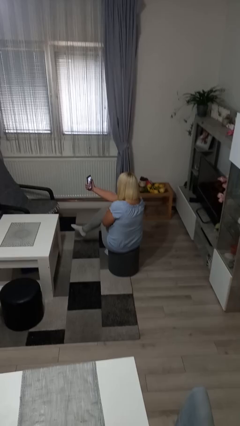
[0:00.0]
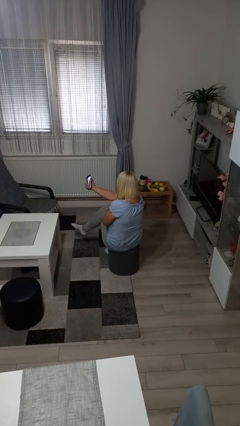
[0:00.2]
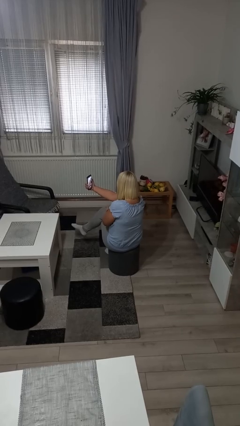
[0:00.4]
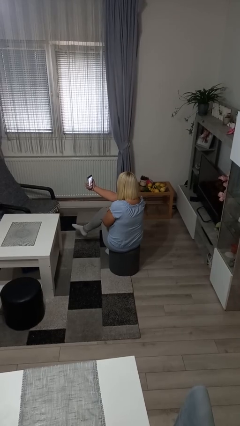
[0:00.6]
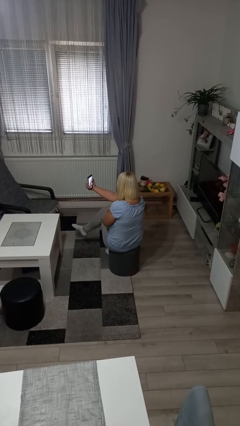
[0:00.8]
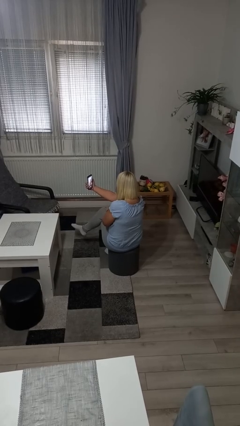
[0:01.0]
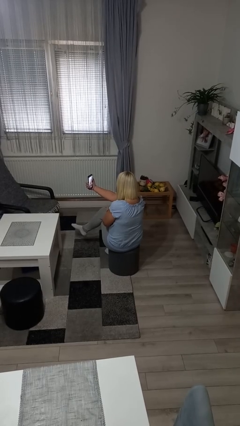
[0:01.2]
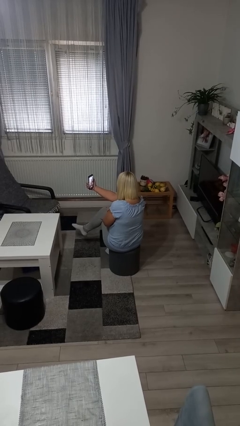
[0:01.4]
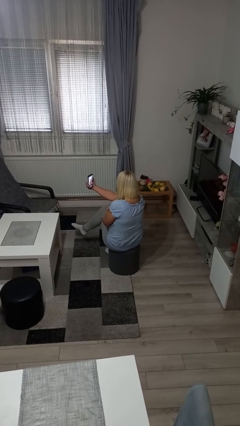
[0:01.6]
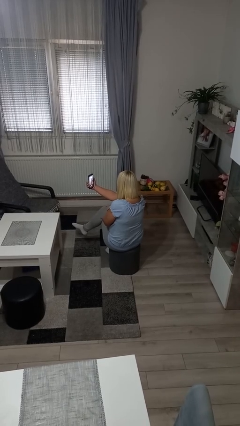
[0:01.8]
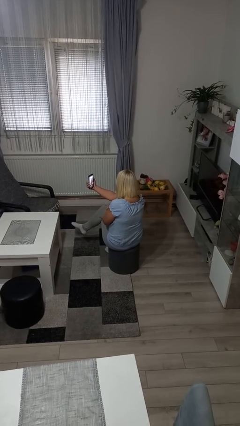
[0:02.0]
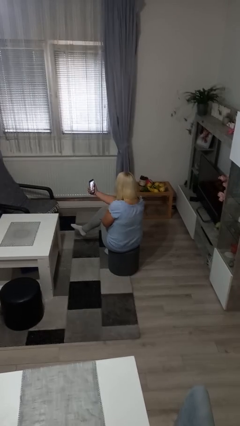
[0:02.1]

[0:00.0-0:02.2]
person takes selfie

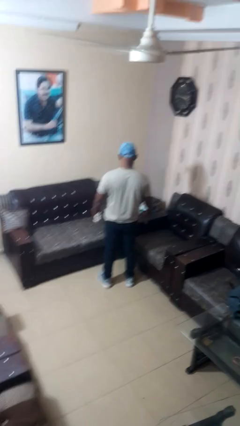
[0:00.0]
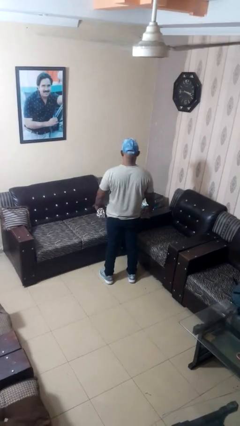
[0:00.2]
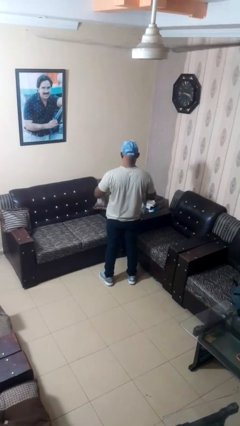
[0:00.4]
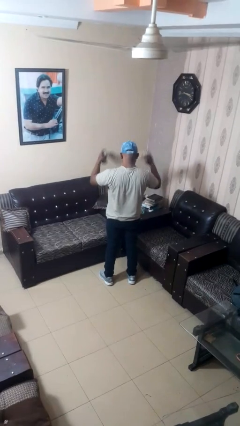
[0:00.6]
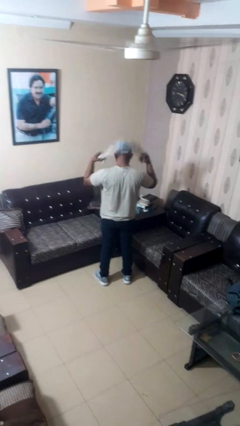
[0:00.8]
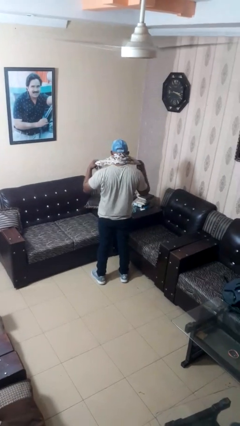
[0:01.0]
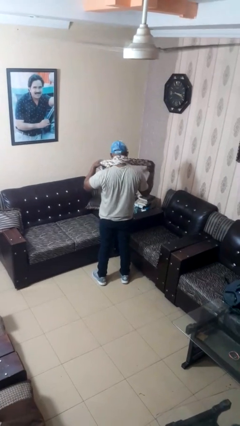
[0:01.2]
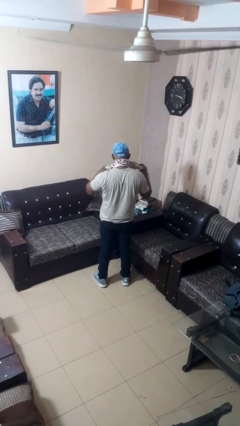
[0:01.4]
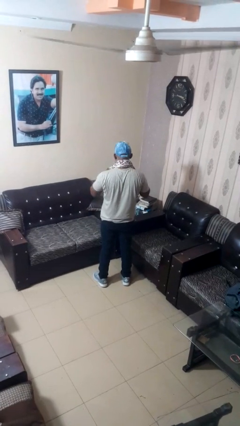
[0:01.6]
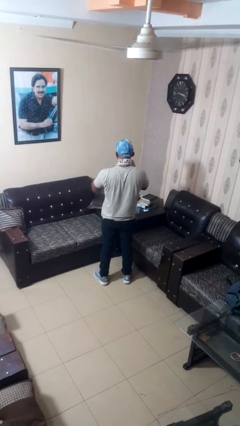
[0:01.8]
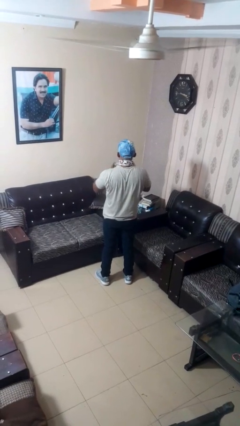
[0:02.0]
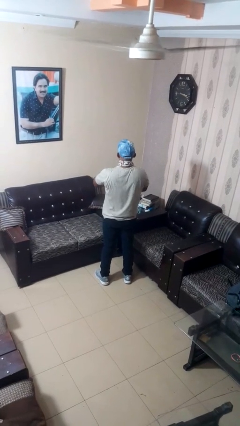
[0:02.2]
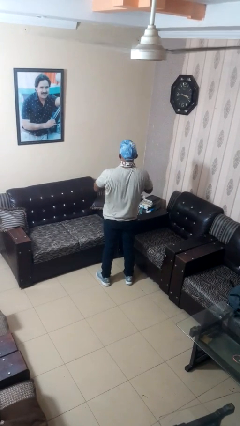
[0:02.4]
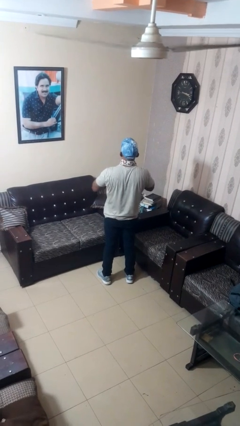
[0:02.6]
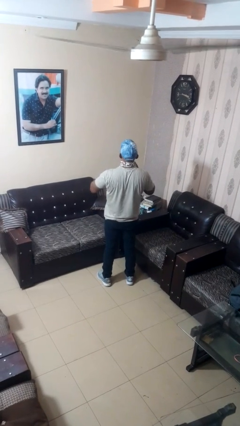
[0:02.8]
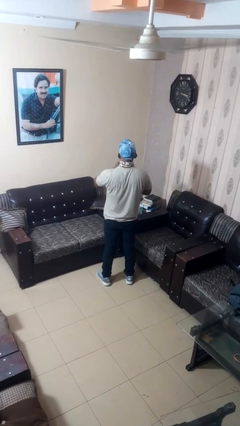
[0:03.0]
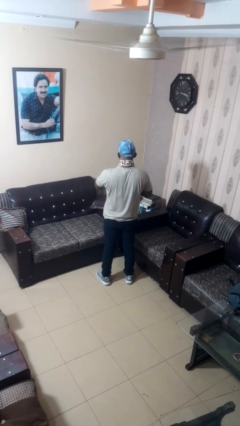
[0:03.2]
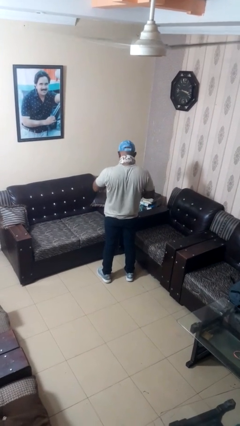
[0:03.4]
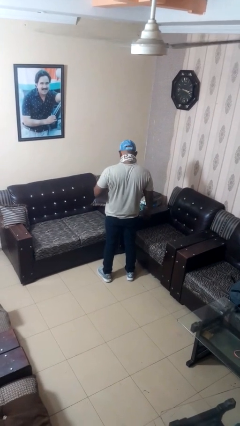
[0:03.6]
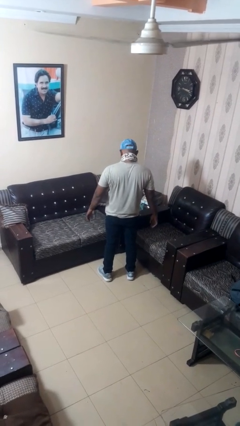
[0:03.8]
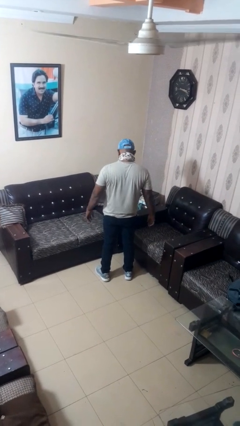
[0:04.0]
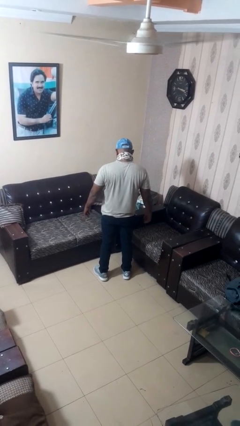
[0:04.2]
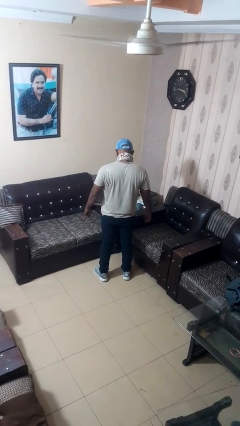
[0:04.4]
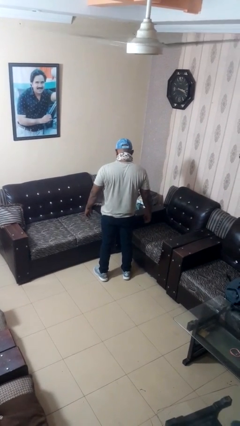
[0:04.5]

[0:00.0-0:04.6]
person puts on scarf

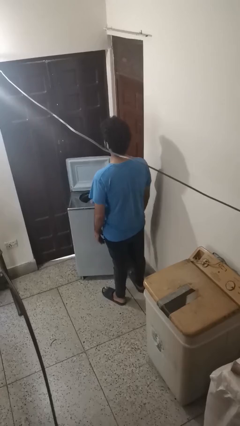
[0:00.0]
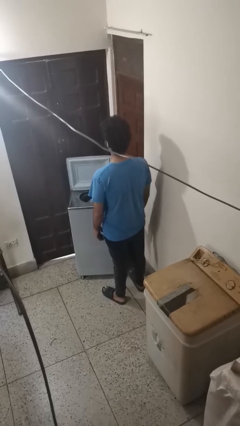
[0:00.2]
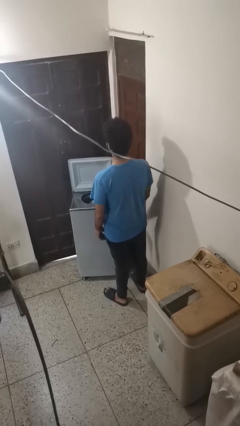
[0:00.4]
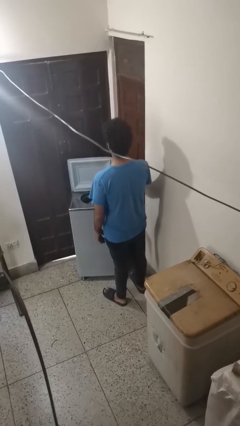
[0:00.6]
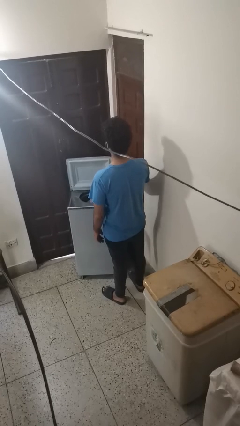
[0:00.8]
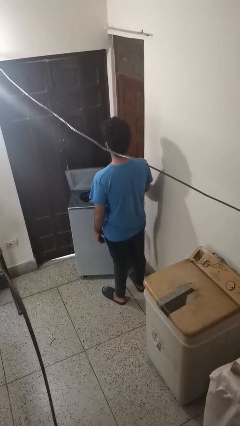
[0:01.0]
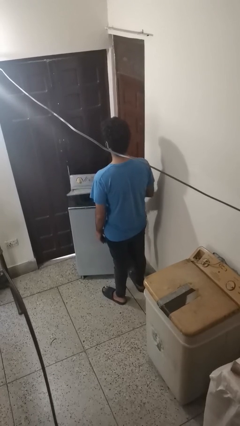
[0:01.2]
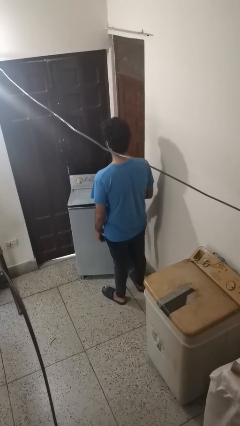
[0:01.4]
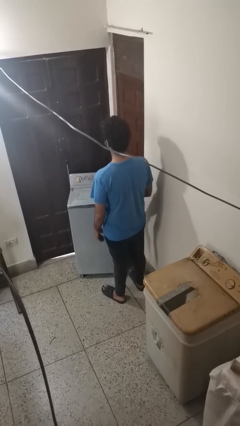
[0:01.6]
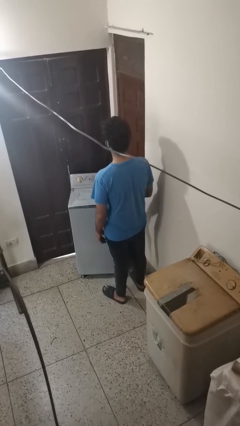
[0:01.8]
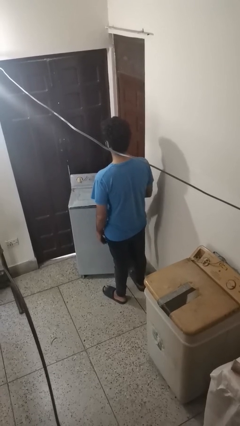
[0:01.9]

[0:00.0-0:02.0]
person closes clothes washer

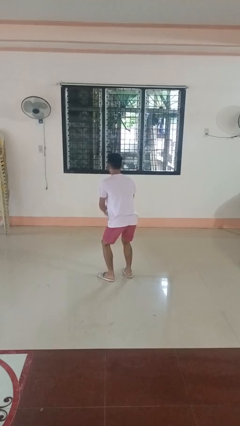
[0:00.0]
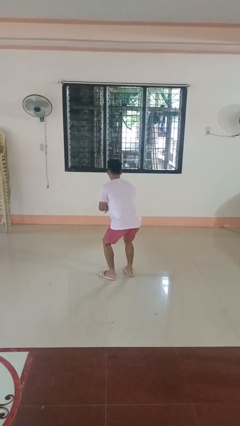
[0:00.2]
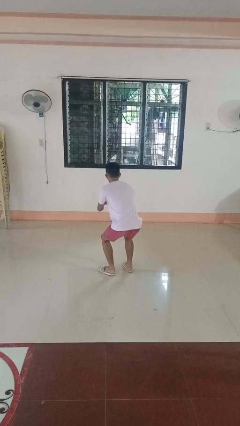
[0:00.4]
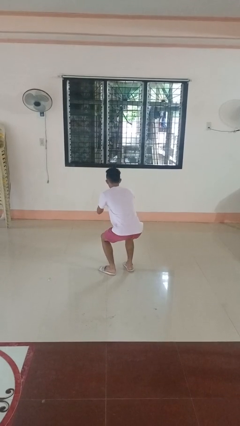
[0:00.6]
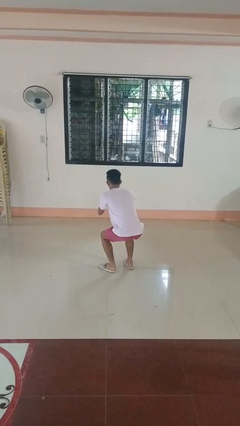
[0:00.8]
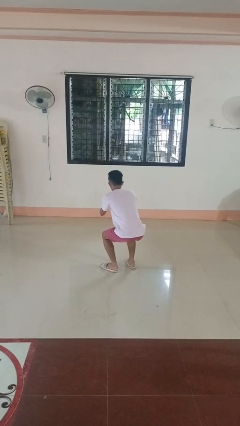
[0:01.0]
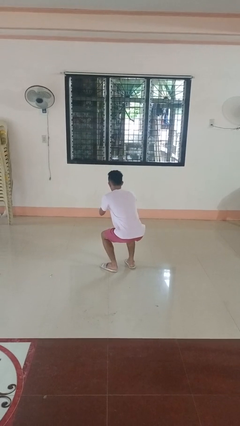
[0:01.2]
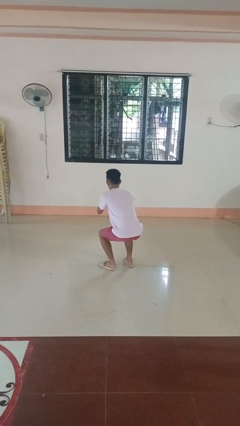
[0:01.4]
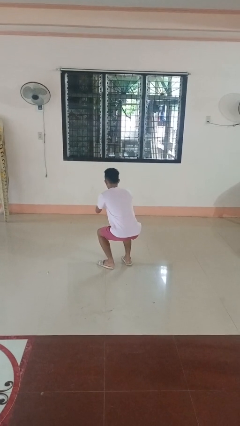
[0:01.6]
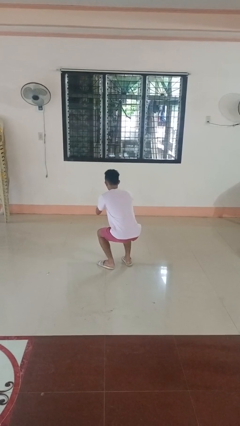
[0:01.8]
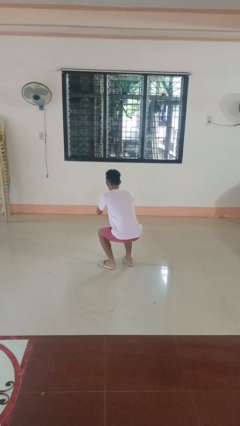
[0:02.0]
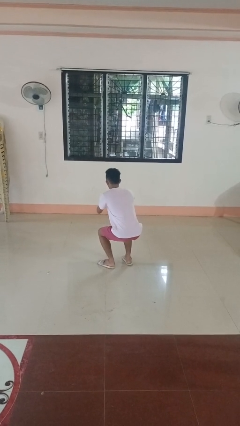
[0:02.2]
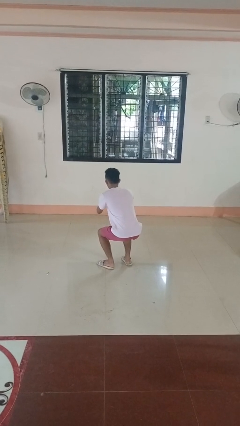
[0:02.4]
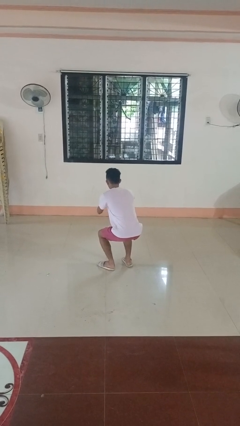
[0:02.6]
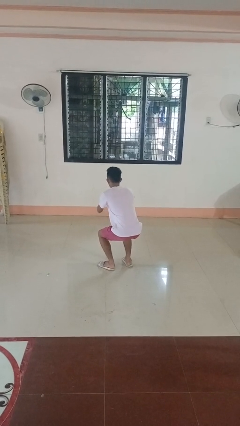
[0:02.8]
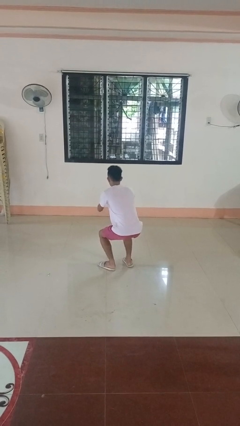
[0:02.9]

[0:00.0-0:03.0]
person squats

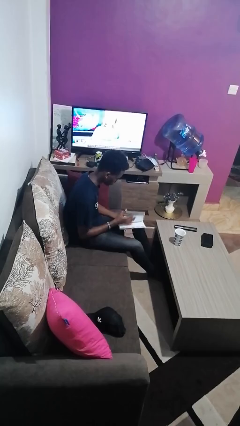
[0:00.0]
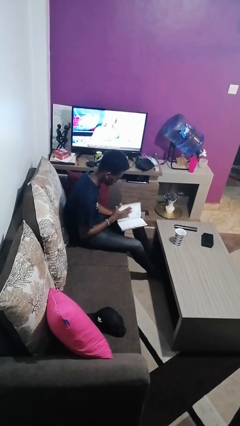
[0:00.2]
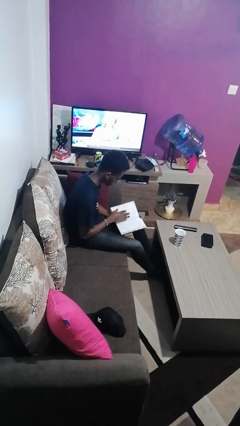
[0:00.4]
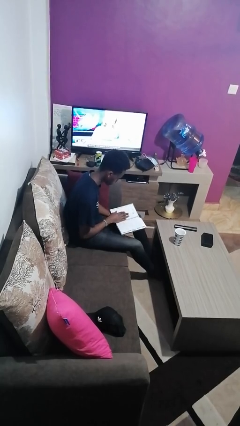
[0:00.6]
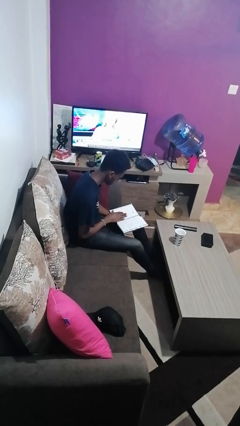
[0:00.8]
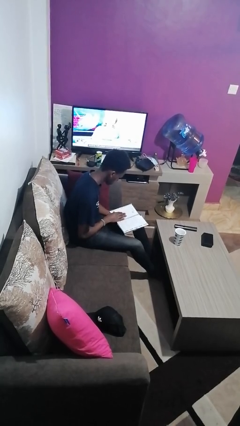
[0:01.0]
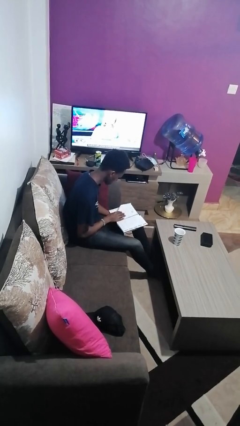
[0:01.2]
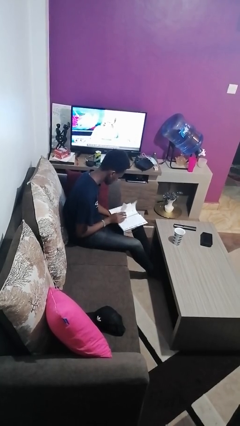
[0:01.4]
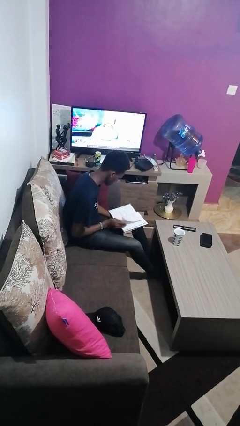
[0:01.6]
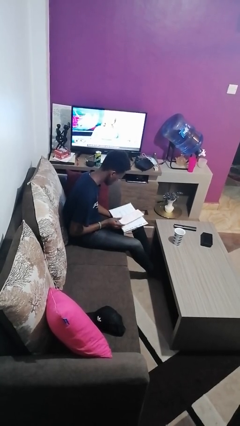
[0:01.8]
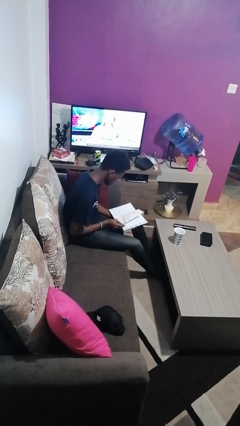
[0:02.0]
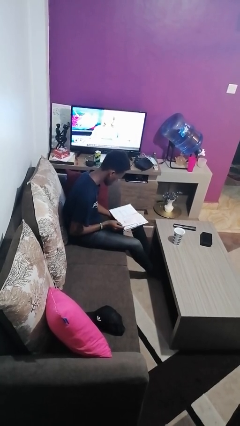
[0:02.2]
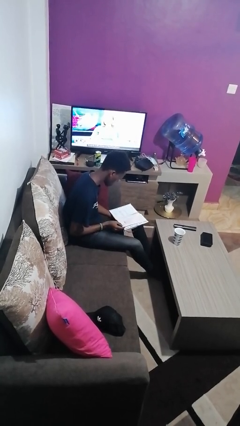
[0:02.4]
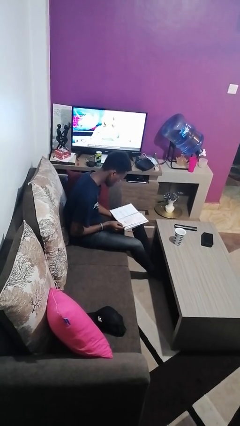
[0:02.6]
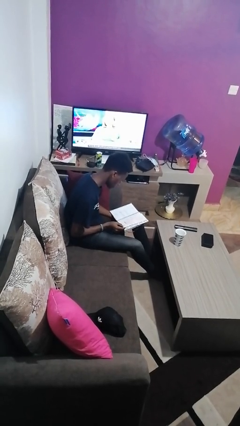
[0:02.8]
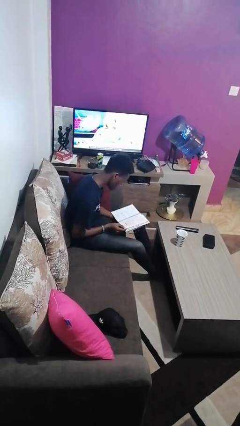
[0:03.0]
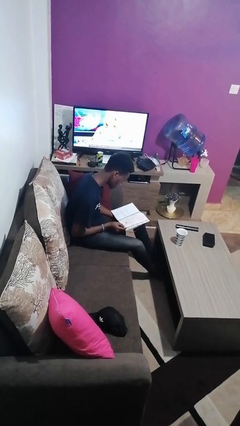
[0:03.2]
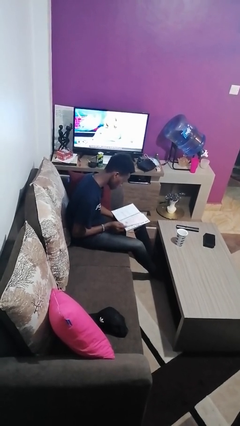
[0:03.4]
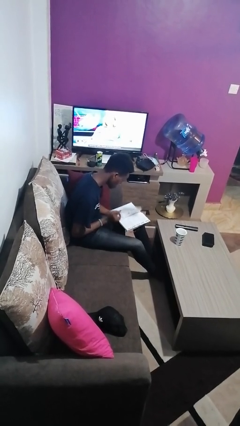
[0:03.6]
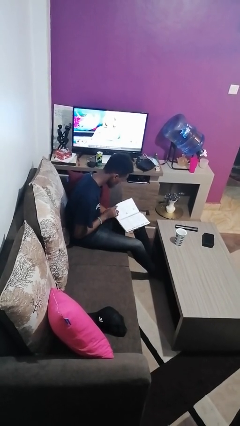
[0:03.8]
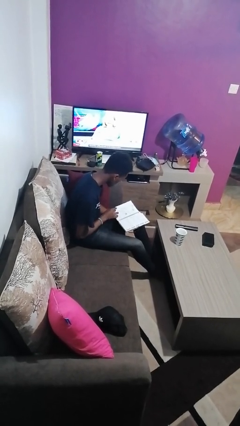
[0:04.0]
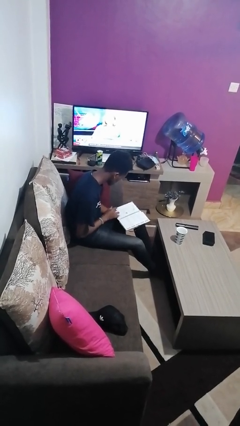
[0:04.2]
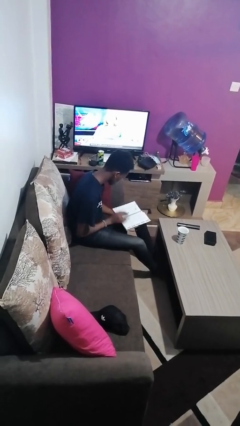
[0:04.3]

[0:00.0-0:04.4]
person reads book

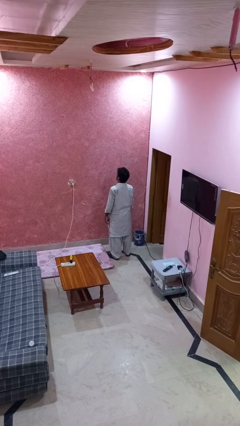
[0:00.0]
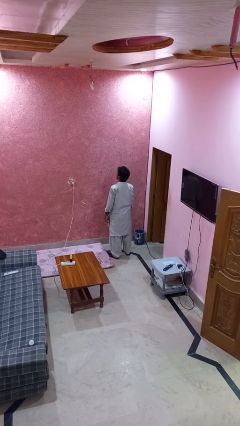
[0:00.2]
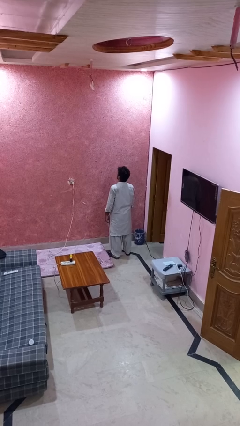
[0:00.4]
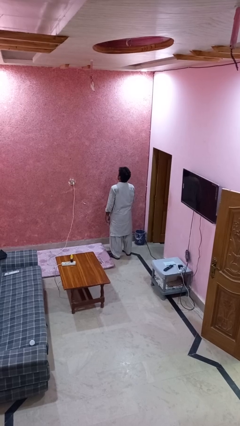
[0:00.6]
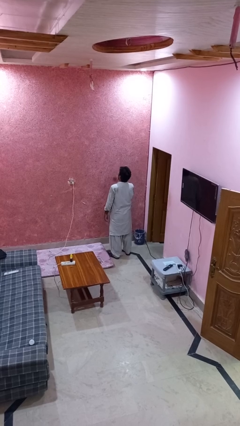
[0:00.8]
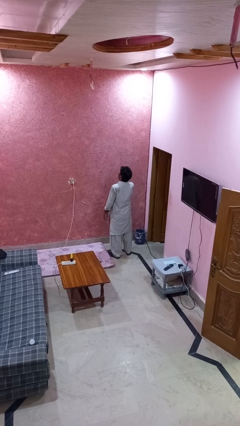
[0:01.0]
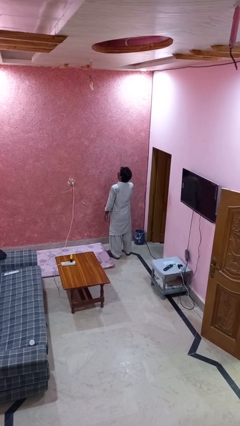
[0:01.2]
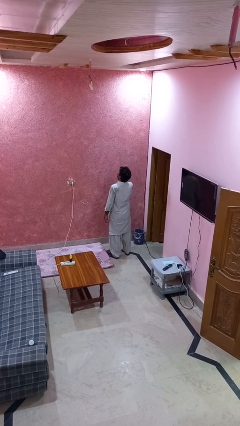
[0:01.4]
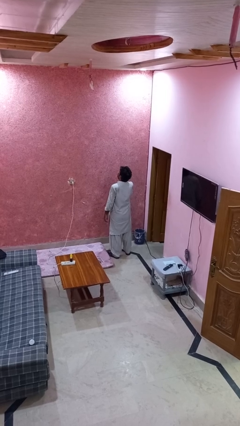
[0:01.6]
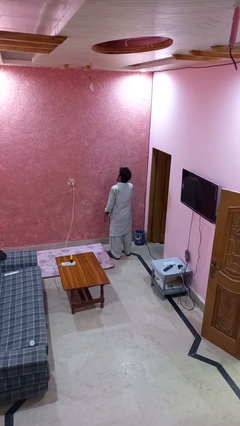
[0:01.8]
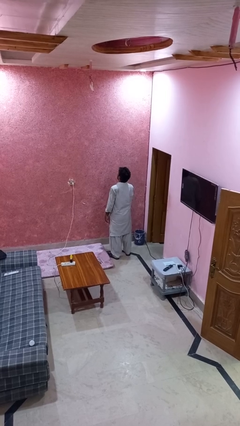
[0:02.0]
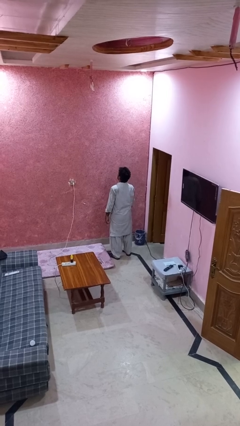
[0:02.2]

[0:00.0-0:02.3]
person yawns
